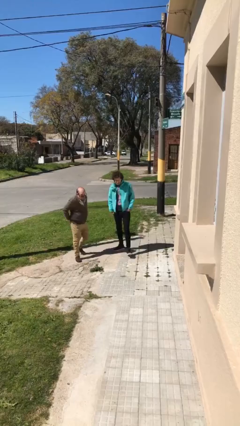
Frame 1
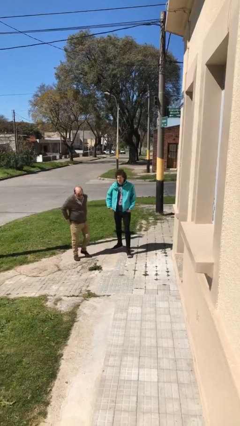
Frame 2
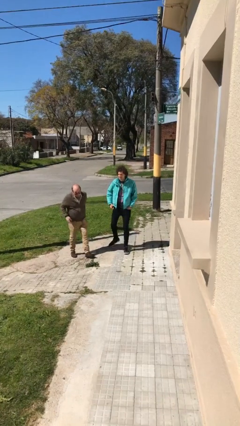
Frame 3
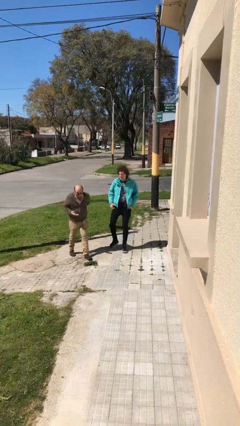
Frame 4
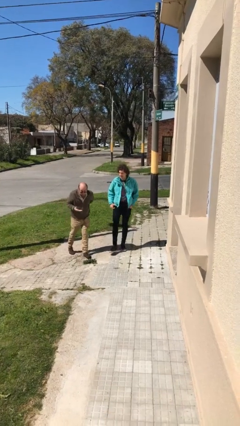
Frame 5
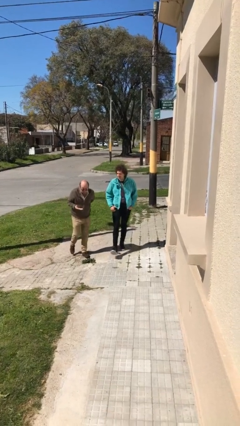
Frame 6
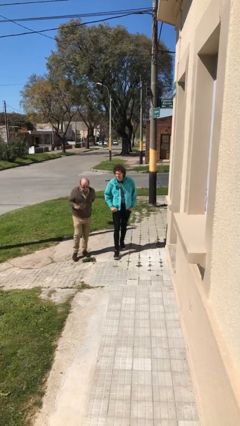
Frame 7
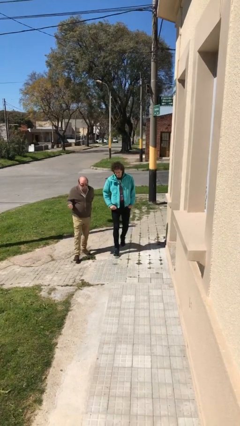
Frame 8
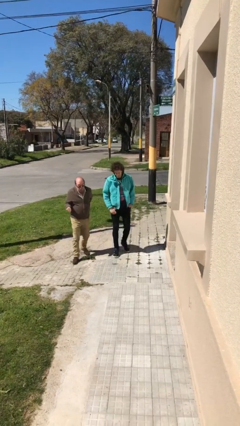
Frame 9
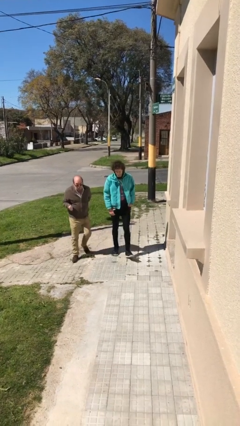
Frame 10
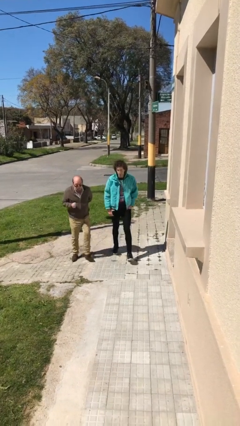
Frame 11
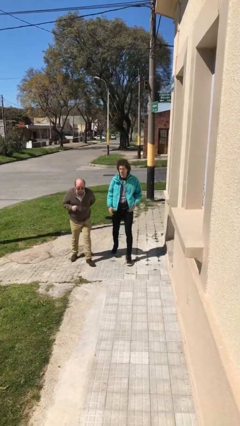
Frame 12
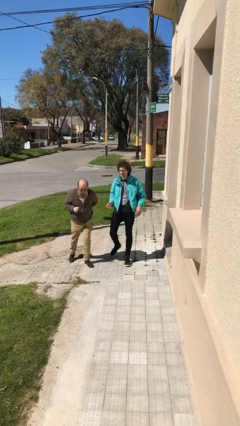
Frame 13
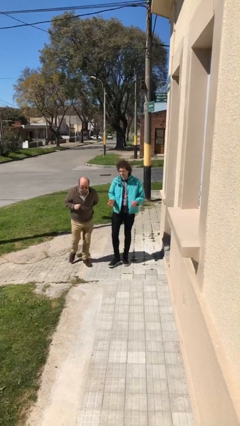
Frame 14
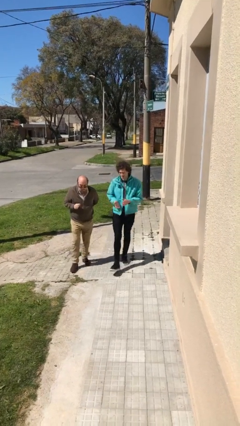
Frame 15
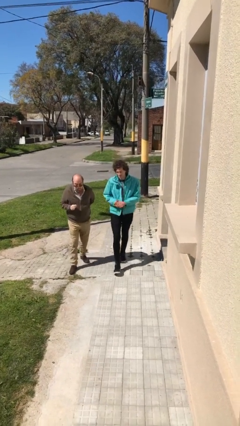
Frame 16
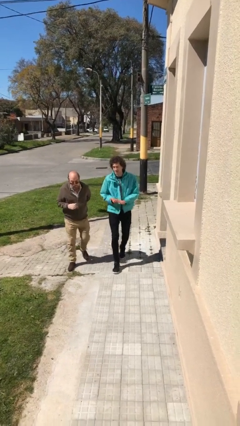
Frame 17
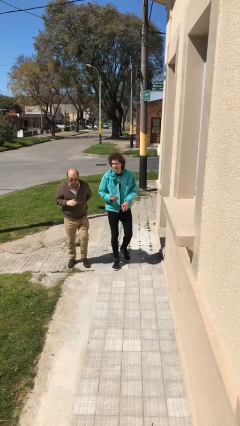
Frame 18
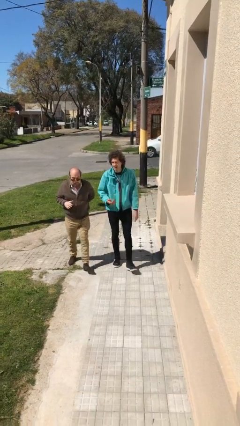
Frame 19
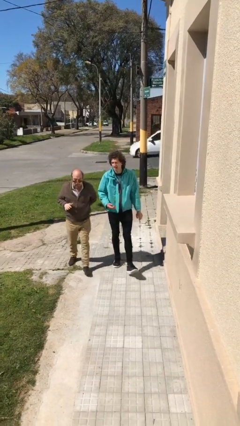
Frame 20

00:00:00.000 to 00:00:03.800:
person talks to person

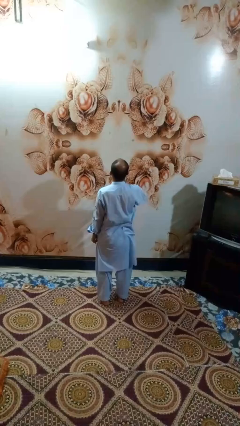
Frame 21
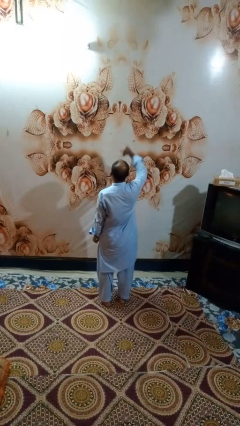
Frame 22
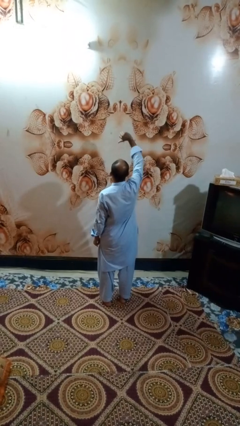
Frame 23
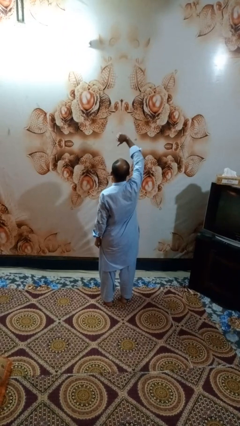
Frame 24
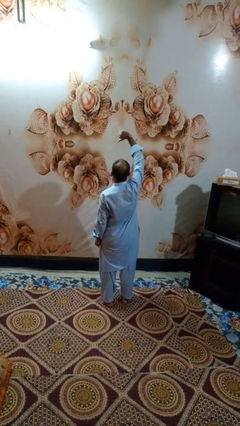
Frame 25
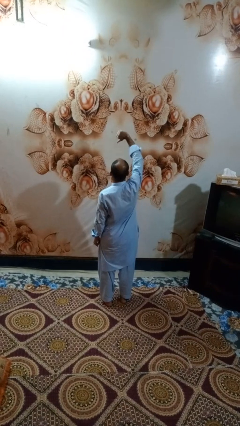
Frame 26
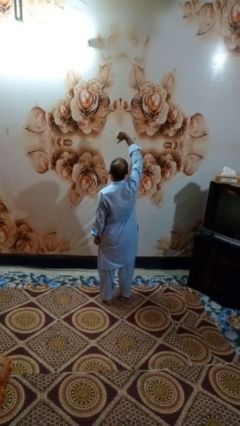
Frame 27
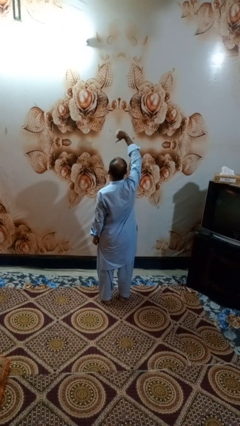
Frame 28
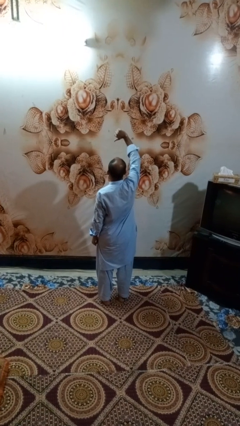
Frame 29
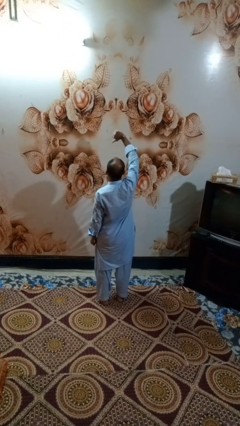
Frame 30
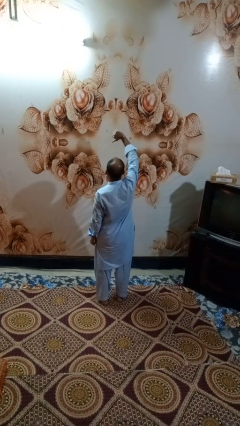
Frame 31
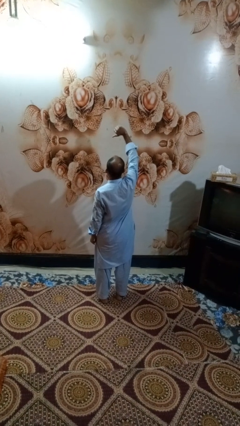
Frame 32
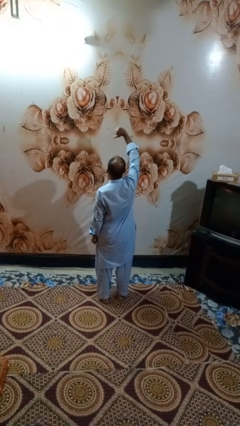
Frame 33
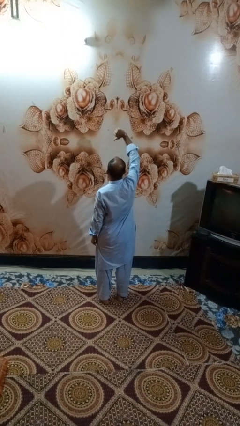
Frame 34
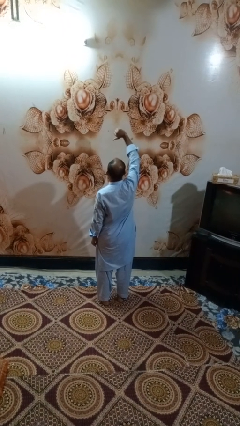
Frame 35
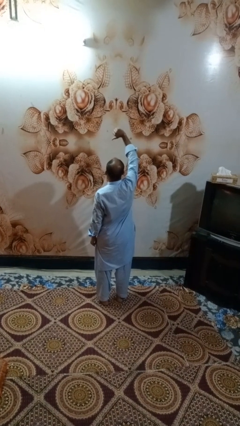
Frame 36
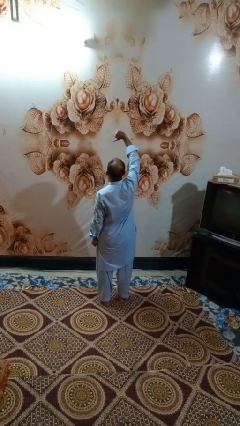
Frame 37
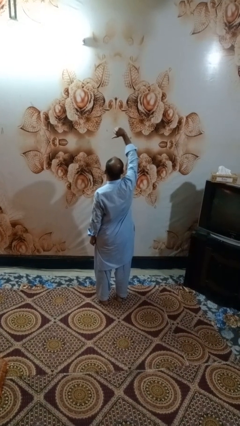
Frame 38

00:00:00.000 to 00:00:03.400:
person gestures thumbs down

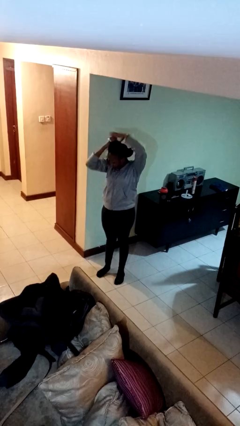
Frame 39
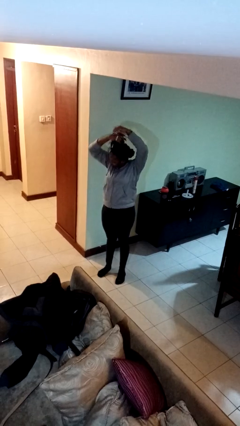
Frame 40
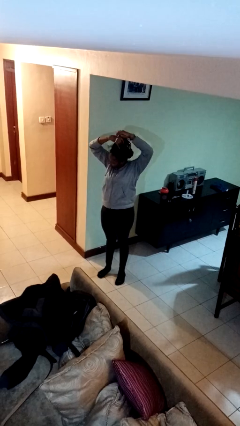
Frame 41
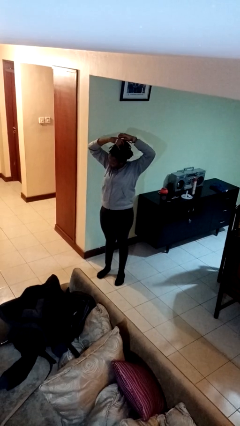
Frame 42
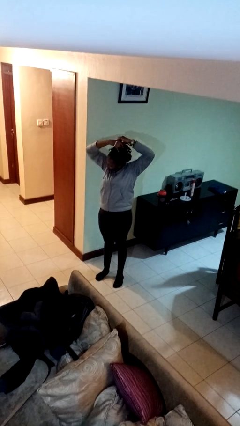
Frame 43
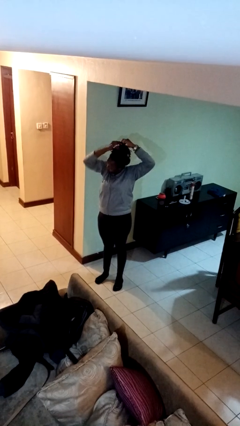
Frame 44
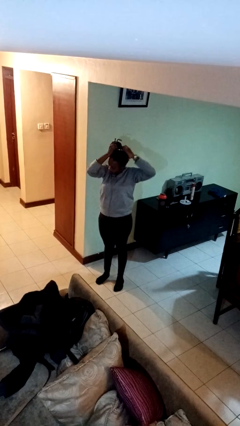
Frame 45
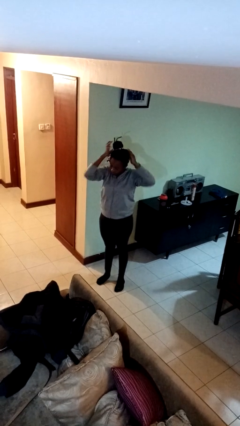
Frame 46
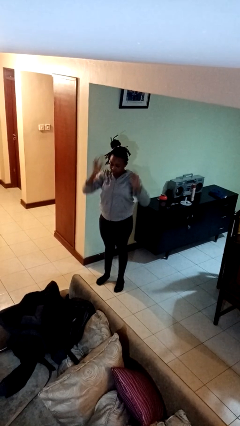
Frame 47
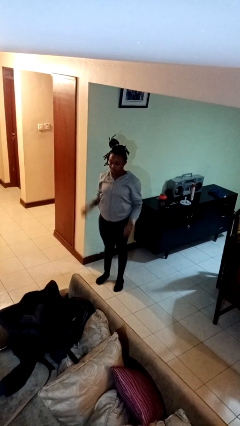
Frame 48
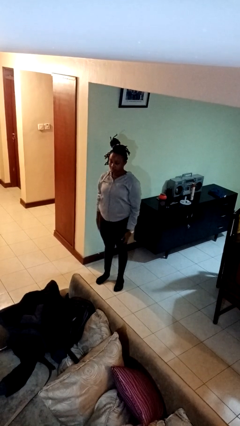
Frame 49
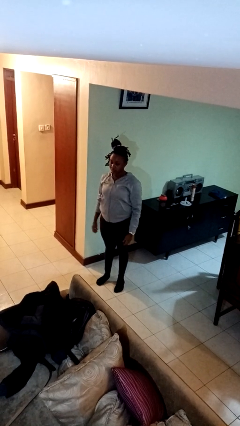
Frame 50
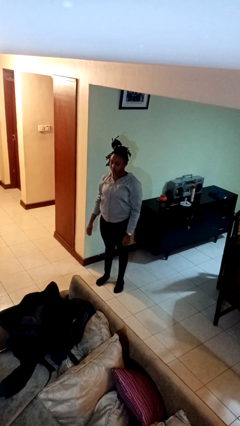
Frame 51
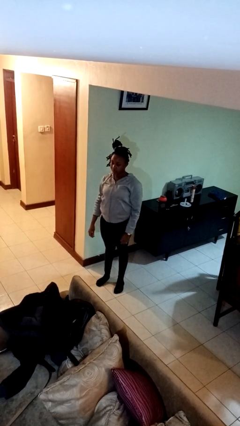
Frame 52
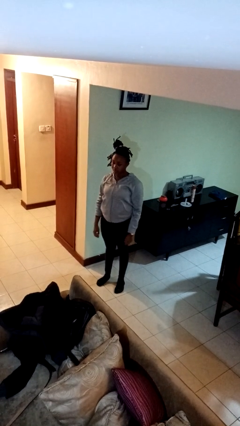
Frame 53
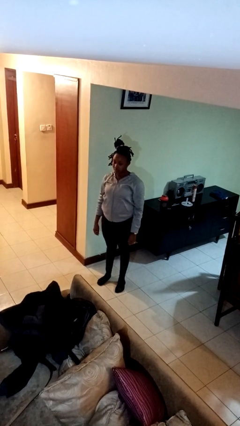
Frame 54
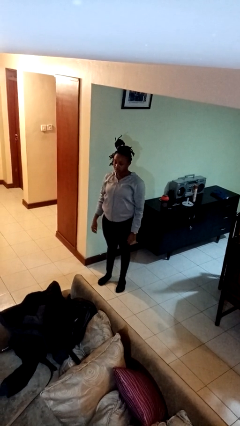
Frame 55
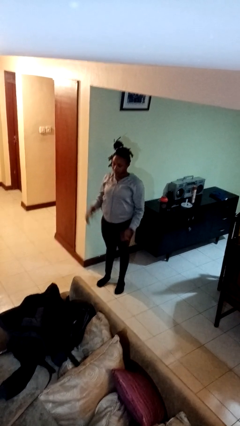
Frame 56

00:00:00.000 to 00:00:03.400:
person puts hair in ponytail

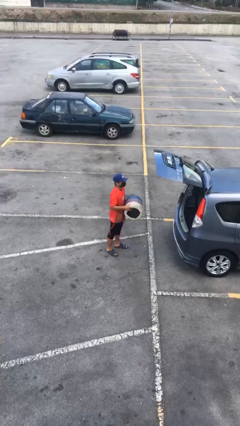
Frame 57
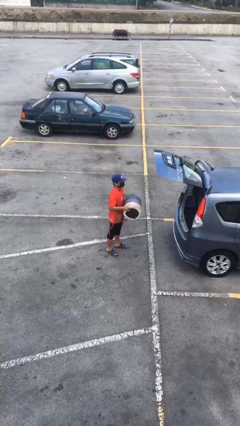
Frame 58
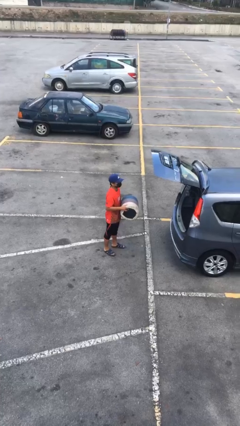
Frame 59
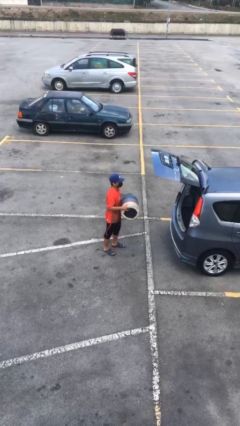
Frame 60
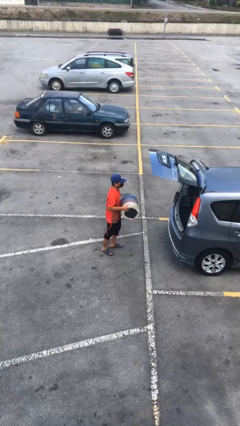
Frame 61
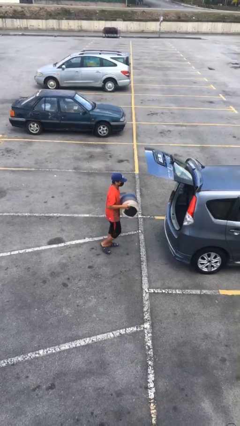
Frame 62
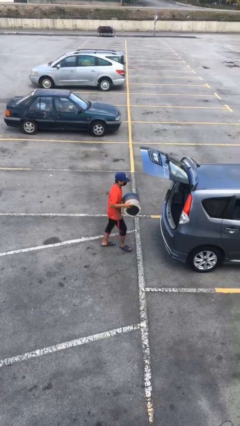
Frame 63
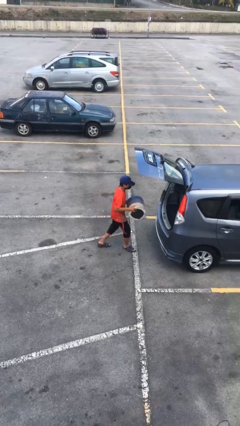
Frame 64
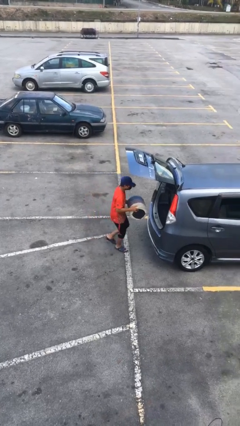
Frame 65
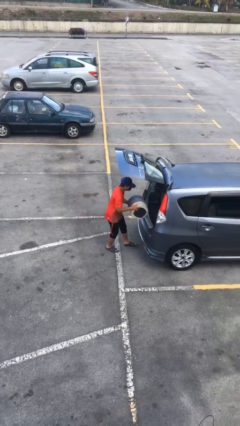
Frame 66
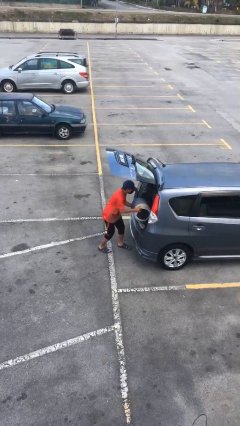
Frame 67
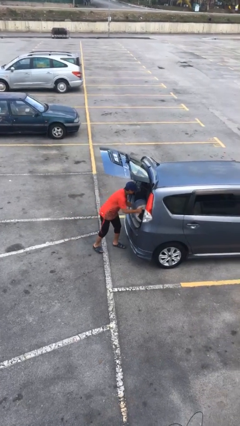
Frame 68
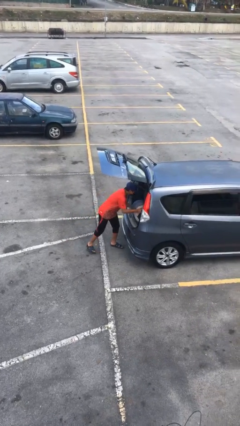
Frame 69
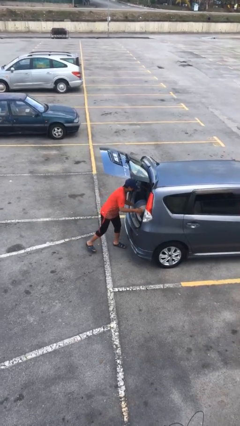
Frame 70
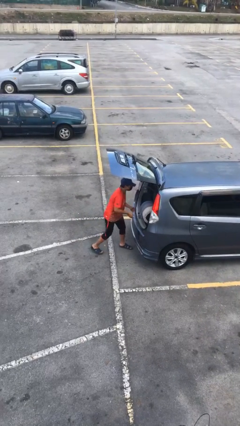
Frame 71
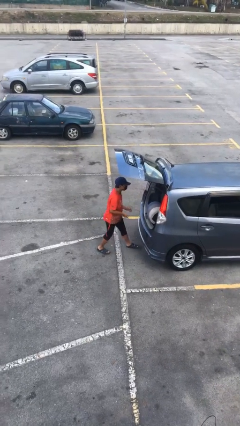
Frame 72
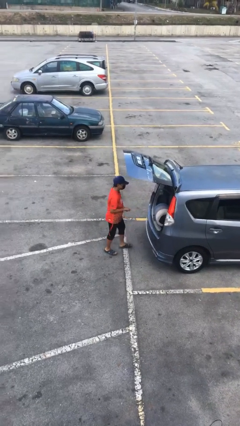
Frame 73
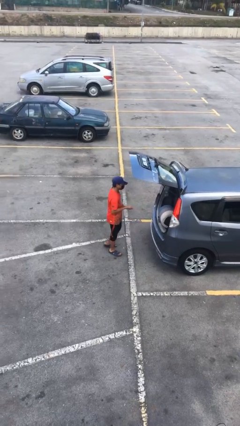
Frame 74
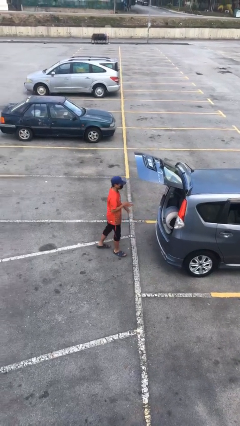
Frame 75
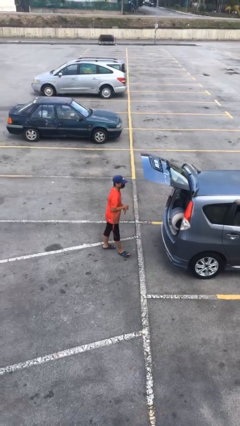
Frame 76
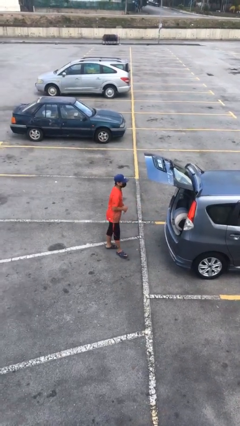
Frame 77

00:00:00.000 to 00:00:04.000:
person loads car

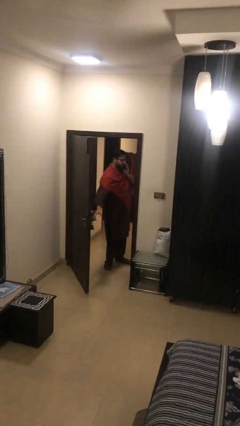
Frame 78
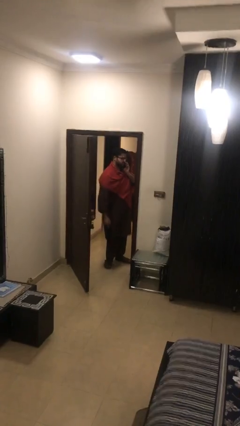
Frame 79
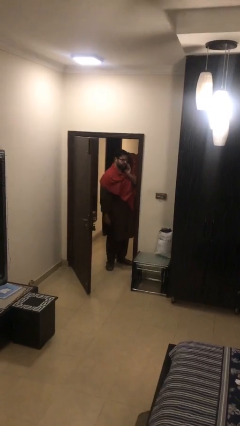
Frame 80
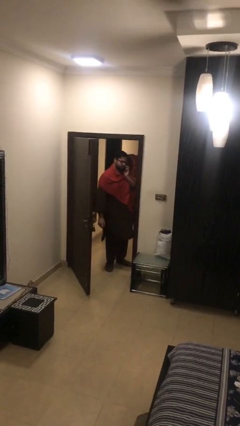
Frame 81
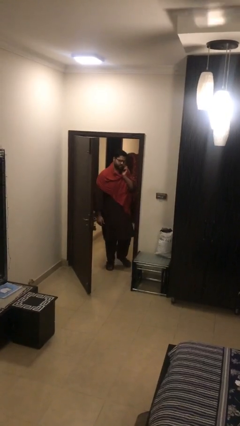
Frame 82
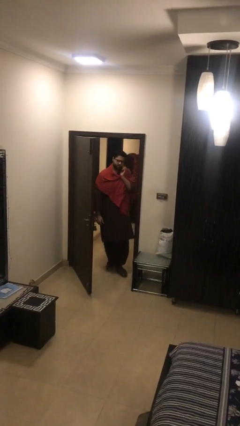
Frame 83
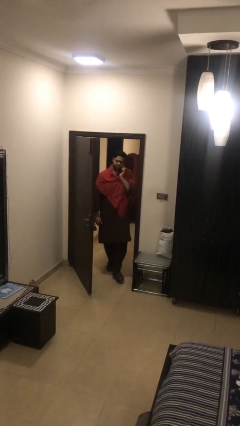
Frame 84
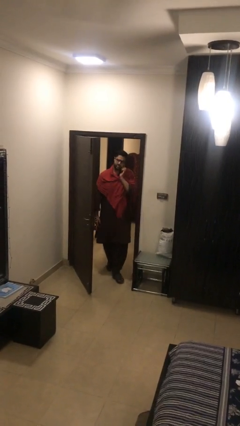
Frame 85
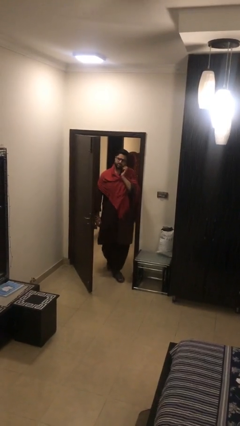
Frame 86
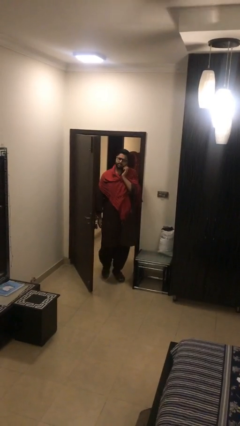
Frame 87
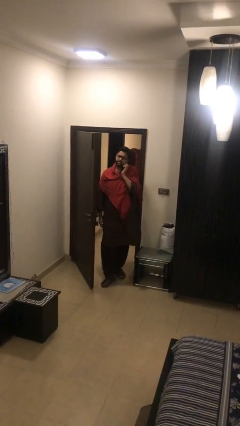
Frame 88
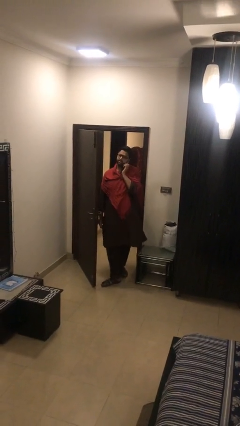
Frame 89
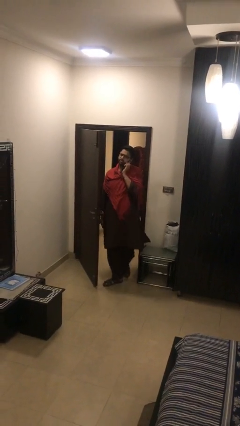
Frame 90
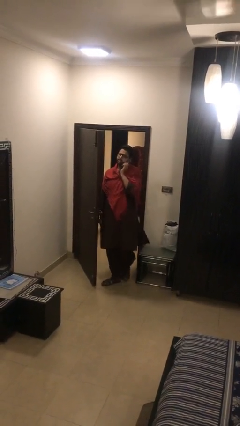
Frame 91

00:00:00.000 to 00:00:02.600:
person enters scene through structure

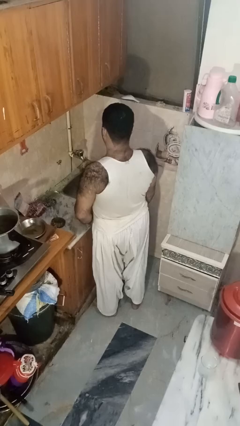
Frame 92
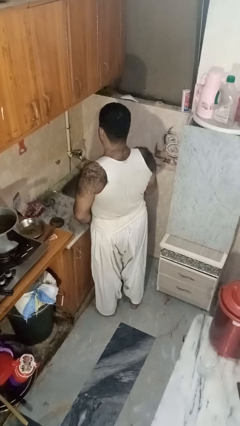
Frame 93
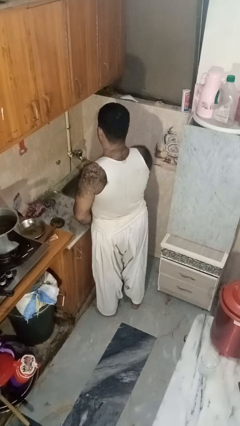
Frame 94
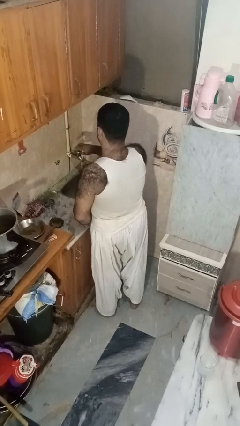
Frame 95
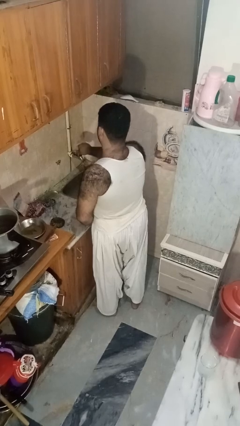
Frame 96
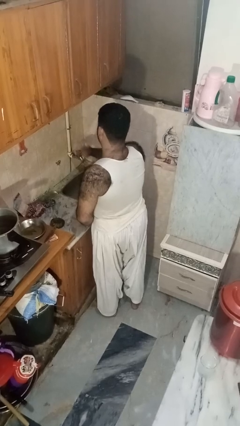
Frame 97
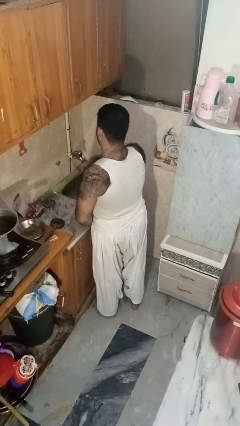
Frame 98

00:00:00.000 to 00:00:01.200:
person turns off faucet
